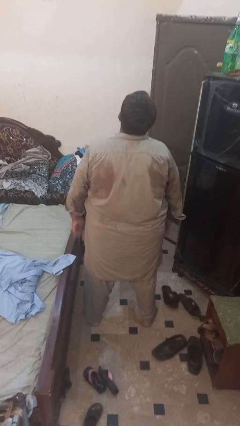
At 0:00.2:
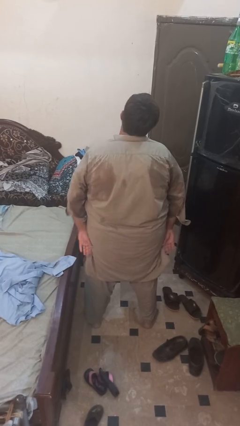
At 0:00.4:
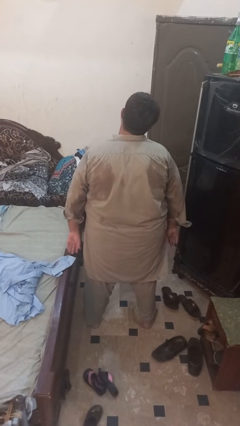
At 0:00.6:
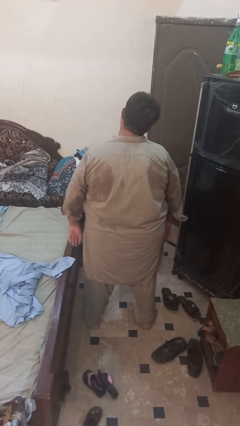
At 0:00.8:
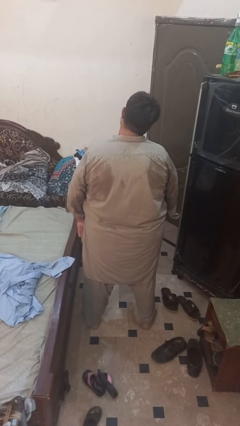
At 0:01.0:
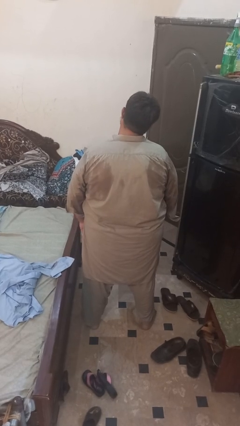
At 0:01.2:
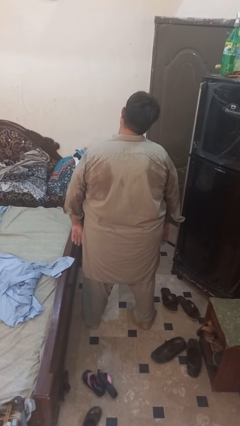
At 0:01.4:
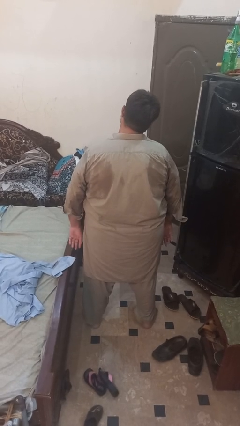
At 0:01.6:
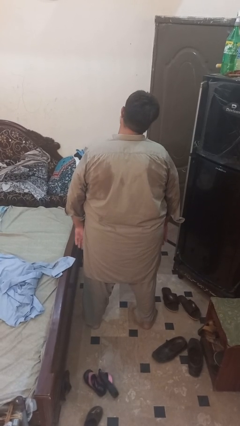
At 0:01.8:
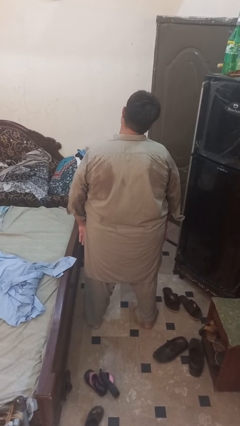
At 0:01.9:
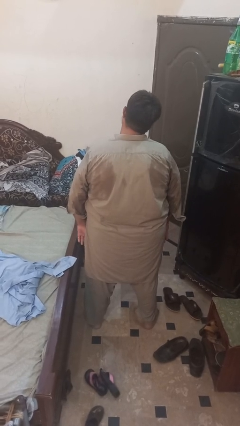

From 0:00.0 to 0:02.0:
person shrugs

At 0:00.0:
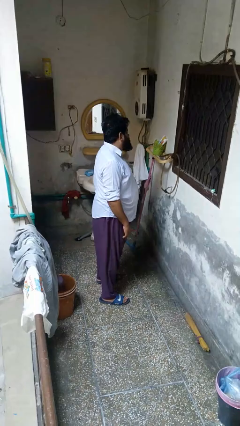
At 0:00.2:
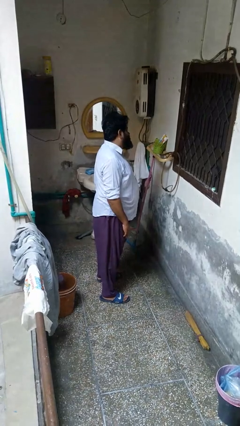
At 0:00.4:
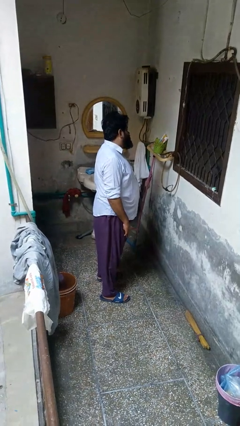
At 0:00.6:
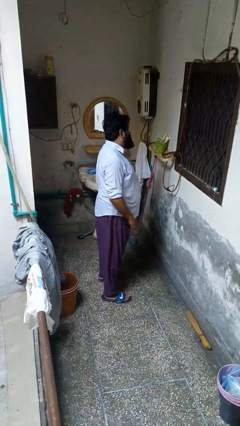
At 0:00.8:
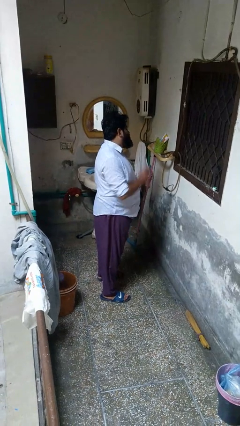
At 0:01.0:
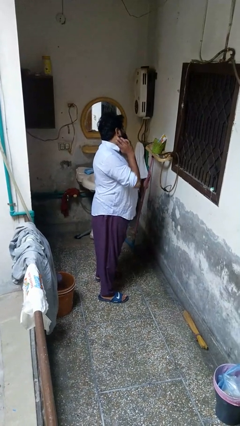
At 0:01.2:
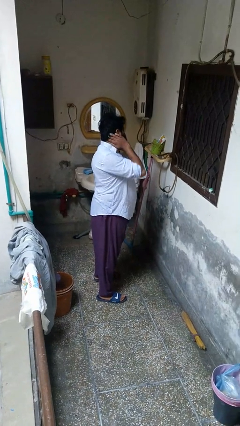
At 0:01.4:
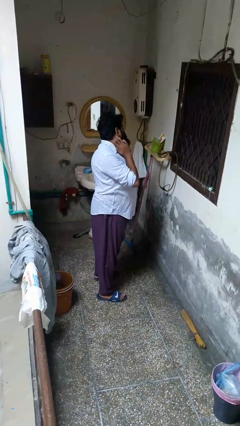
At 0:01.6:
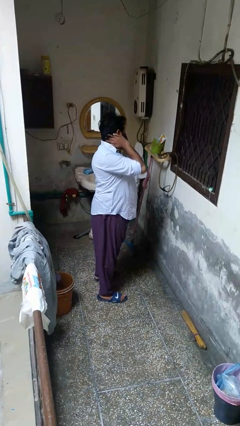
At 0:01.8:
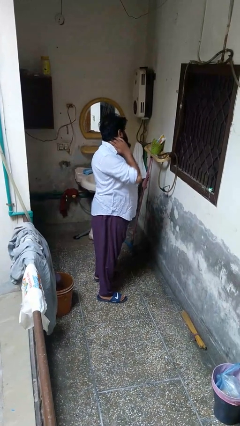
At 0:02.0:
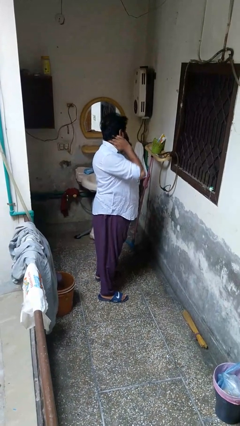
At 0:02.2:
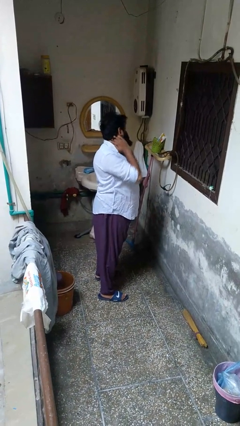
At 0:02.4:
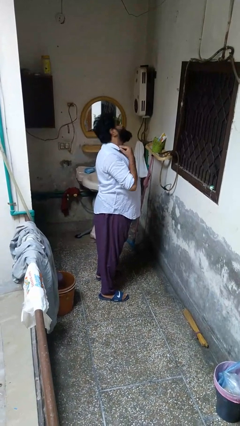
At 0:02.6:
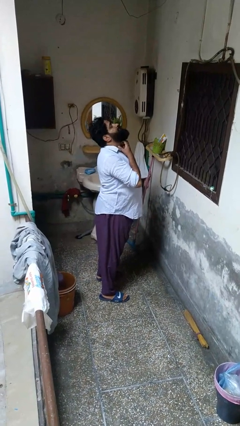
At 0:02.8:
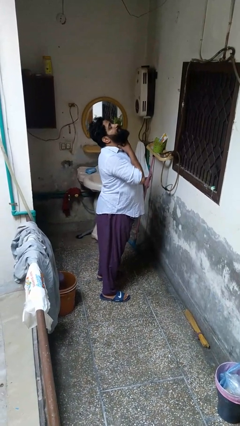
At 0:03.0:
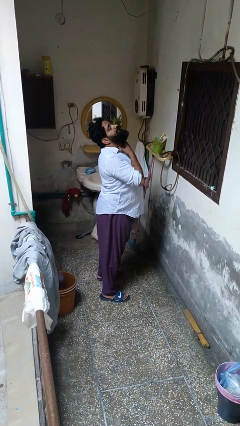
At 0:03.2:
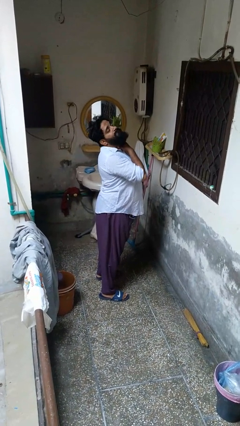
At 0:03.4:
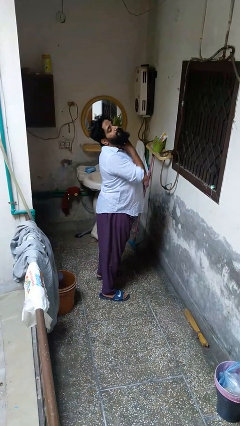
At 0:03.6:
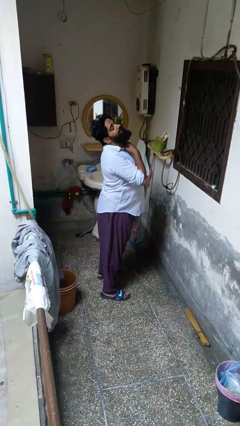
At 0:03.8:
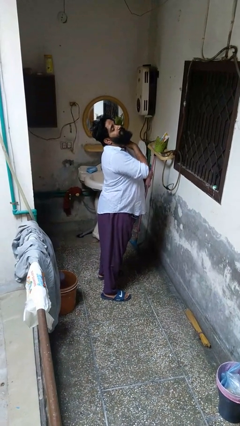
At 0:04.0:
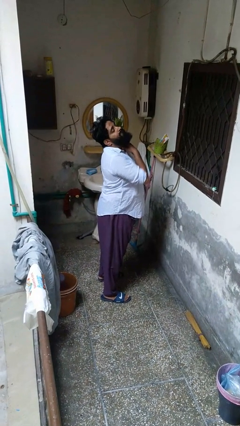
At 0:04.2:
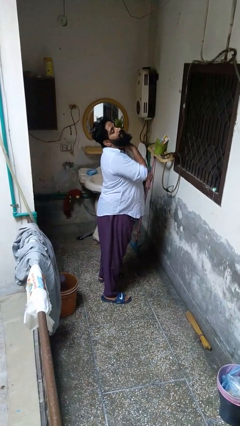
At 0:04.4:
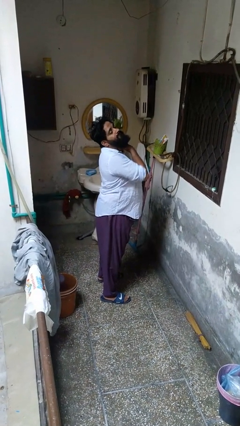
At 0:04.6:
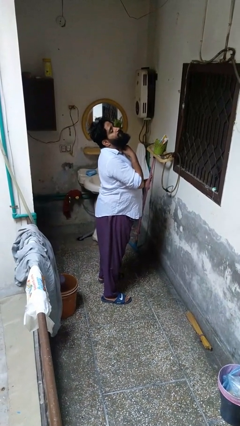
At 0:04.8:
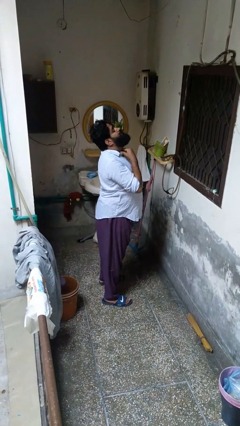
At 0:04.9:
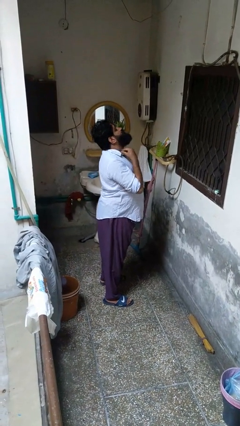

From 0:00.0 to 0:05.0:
person rubs neck

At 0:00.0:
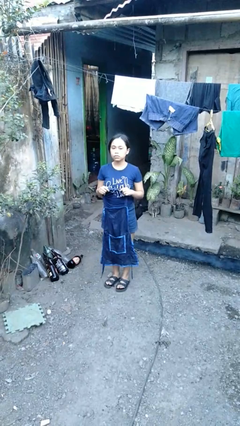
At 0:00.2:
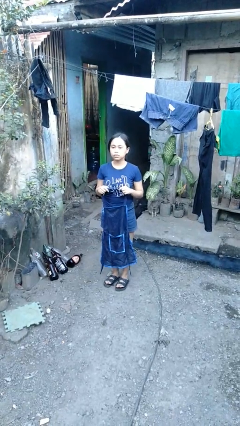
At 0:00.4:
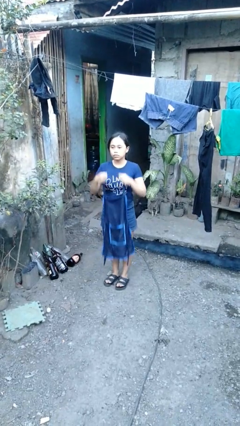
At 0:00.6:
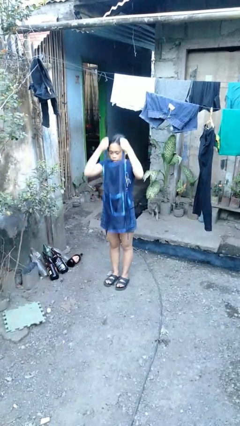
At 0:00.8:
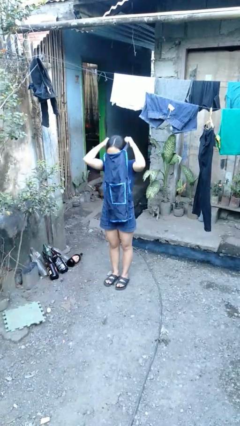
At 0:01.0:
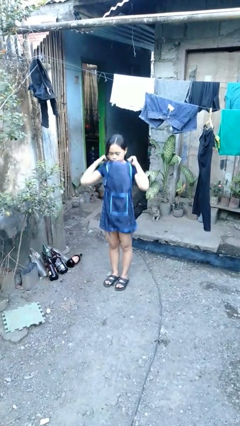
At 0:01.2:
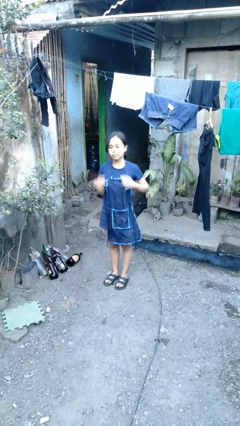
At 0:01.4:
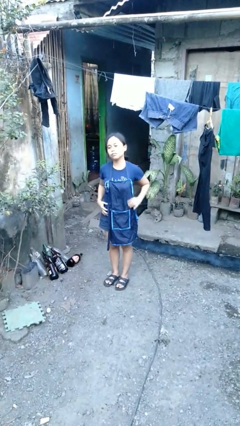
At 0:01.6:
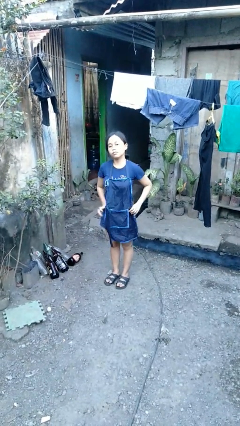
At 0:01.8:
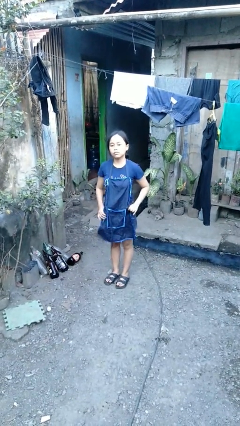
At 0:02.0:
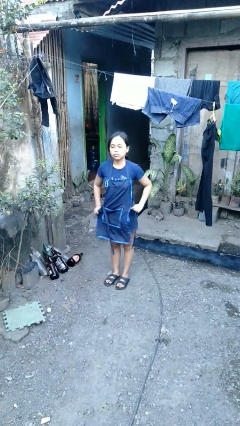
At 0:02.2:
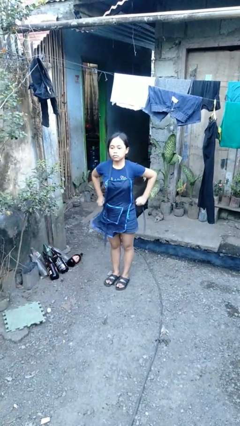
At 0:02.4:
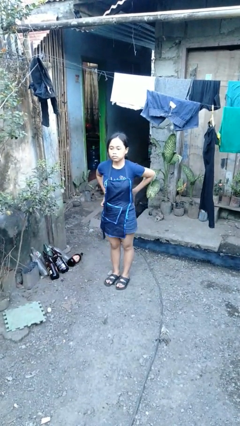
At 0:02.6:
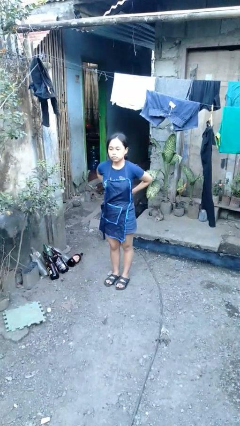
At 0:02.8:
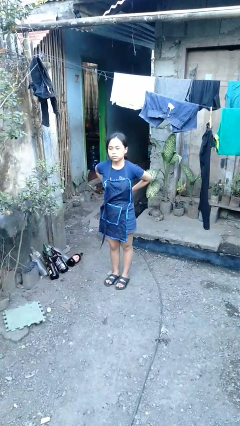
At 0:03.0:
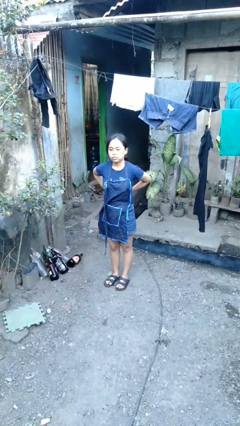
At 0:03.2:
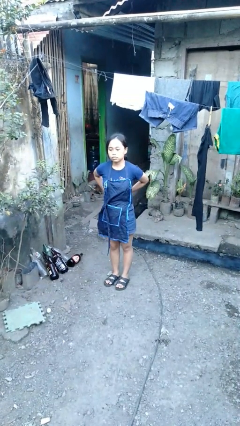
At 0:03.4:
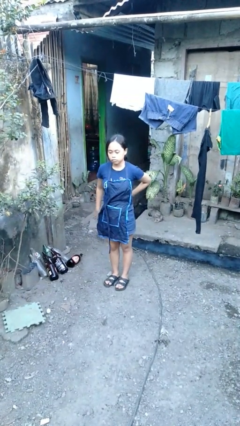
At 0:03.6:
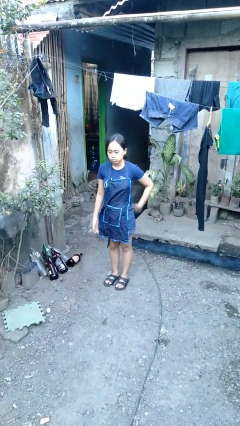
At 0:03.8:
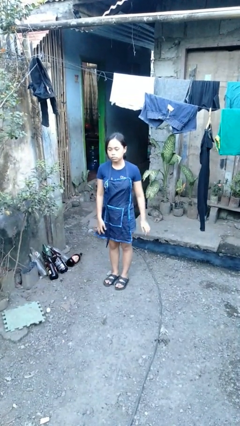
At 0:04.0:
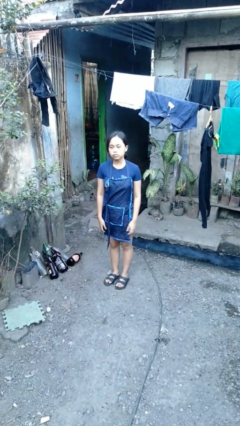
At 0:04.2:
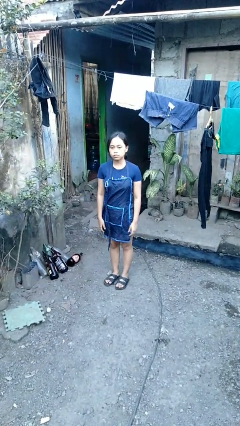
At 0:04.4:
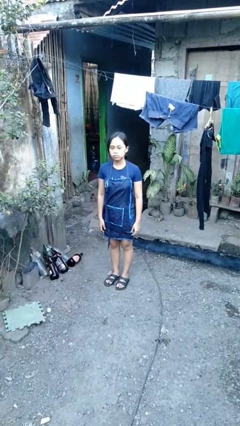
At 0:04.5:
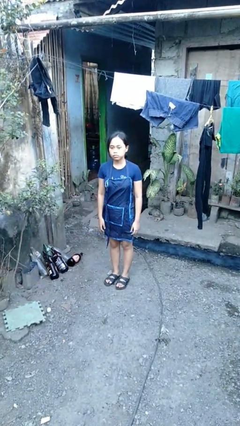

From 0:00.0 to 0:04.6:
person puts on apron

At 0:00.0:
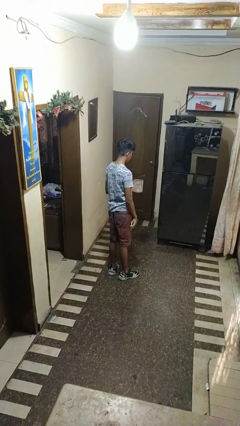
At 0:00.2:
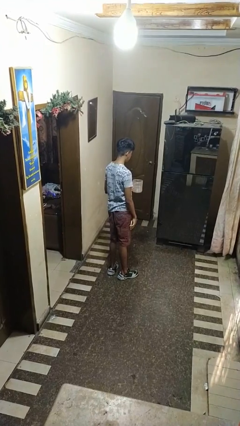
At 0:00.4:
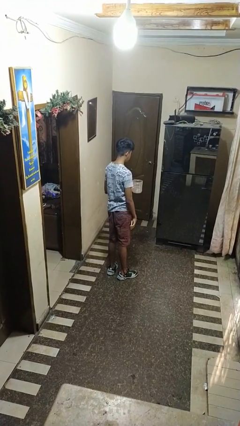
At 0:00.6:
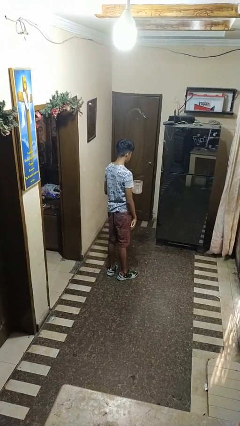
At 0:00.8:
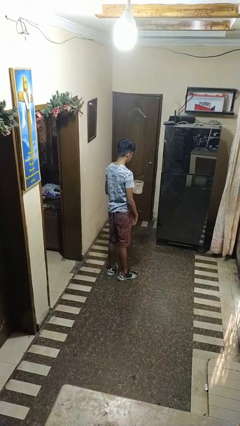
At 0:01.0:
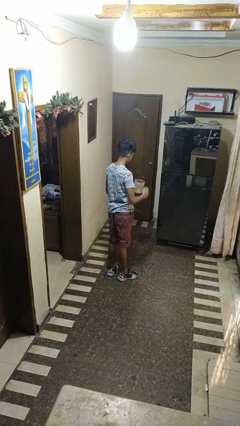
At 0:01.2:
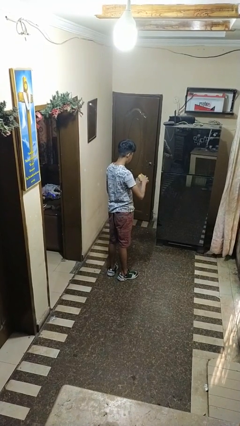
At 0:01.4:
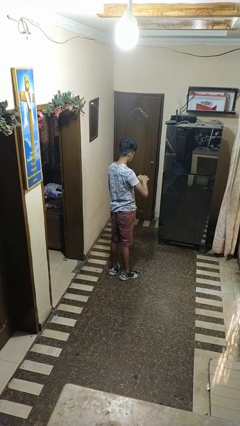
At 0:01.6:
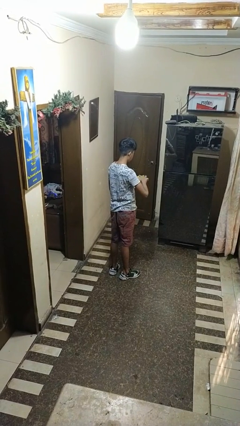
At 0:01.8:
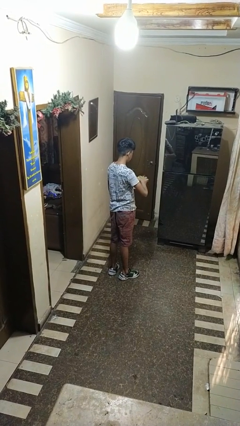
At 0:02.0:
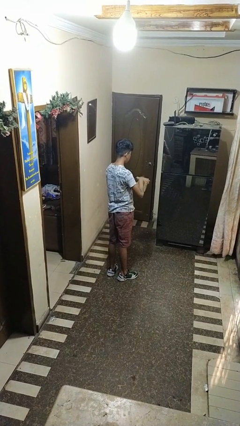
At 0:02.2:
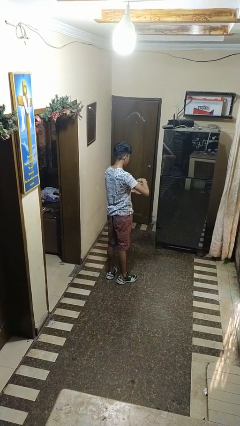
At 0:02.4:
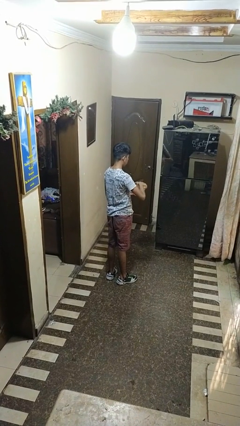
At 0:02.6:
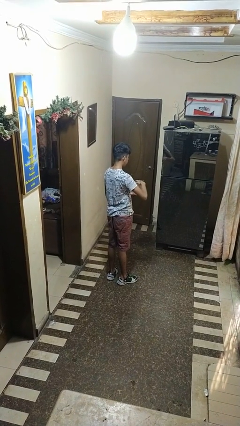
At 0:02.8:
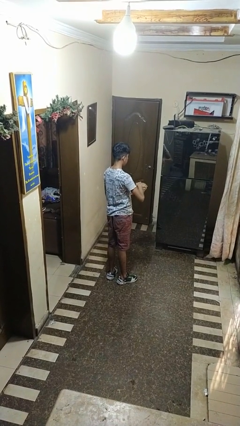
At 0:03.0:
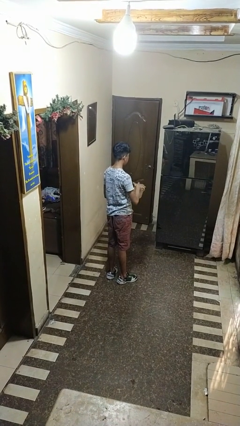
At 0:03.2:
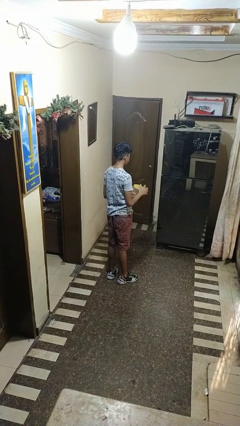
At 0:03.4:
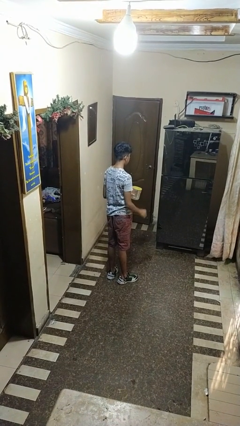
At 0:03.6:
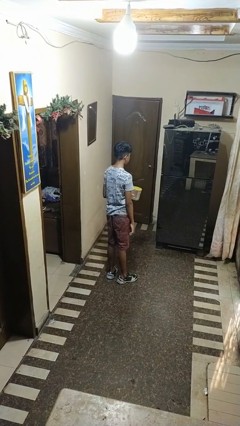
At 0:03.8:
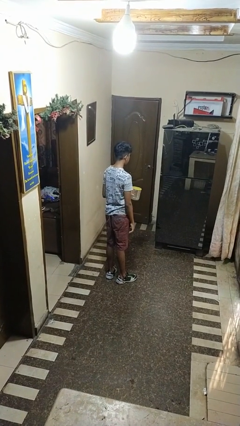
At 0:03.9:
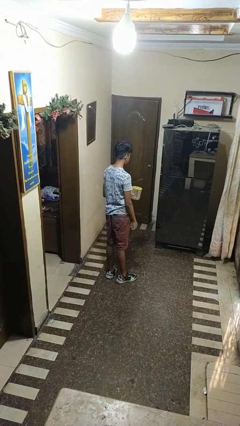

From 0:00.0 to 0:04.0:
person closes jar

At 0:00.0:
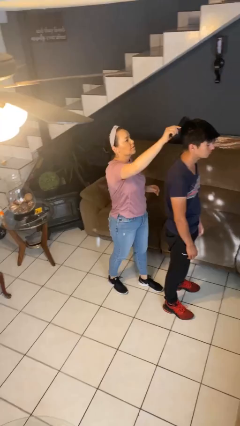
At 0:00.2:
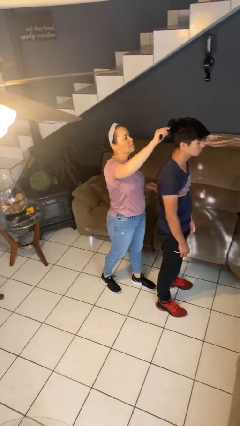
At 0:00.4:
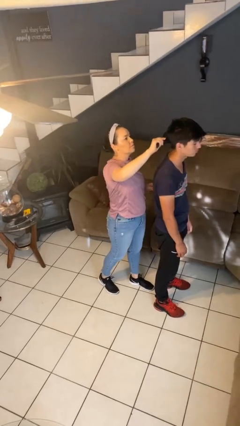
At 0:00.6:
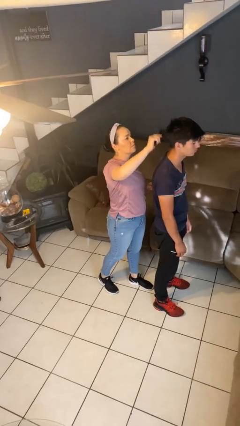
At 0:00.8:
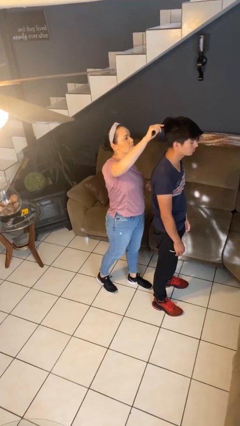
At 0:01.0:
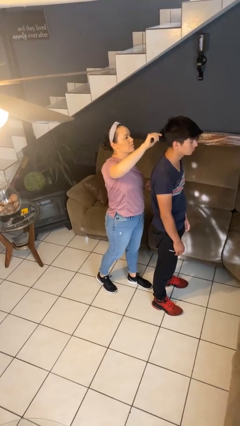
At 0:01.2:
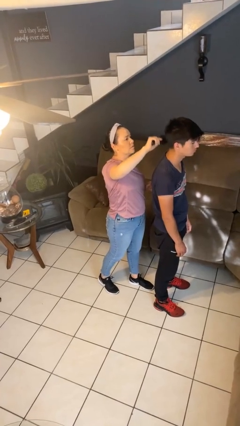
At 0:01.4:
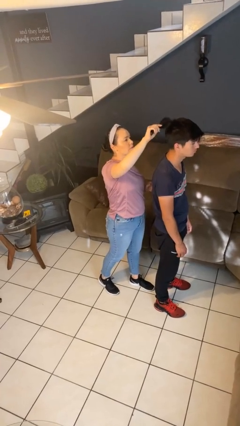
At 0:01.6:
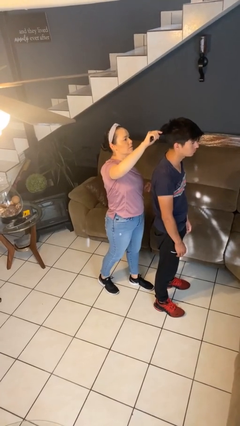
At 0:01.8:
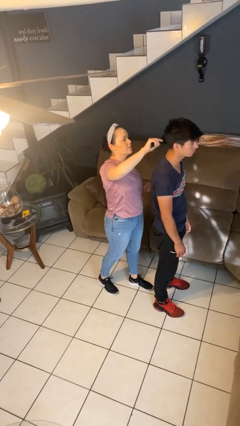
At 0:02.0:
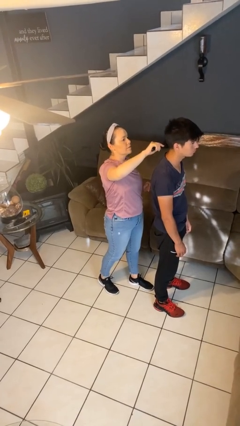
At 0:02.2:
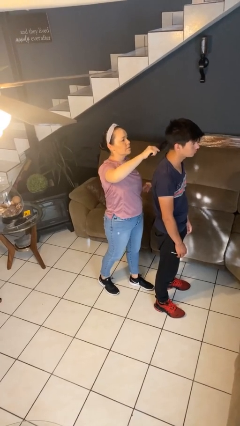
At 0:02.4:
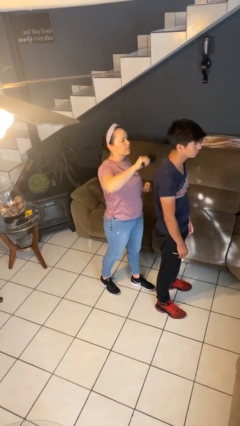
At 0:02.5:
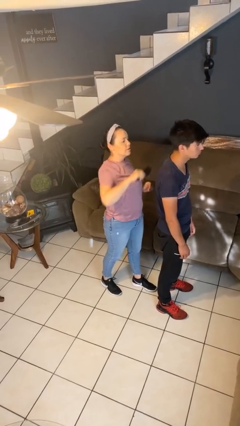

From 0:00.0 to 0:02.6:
person brushes hair of person
